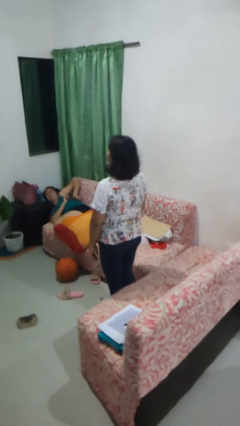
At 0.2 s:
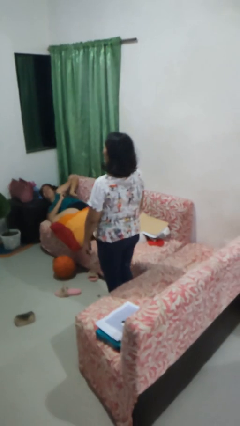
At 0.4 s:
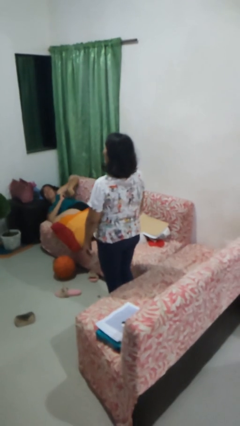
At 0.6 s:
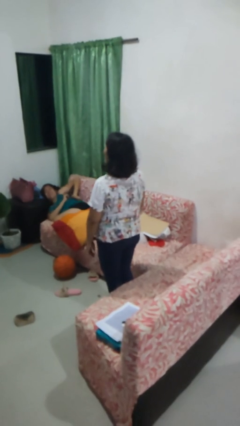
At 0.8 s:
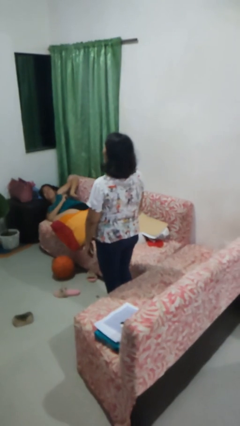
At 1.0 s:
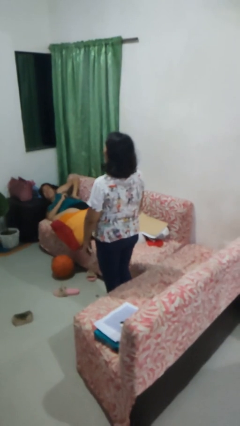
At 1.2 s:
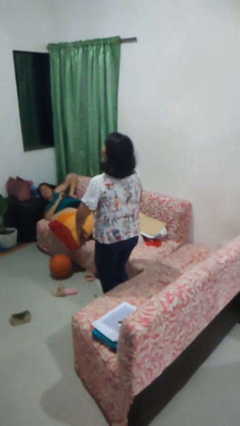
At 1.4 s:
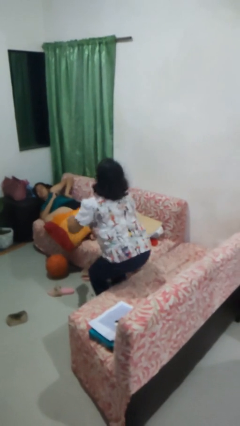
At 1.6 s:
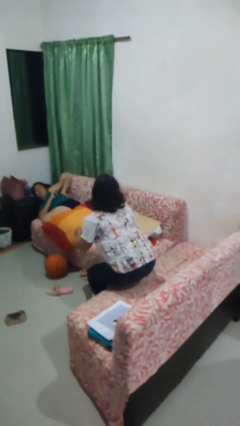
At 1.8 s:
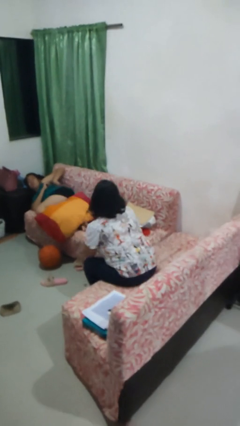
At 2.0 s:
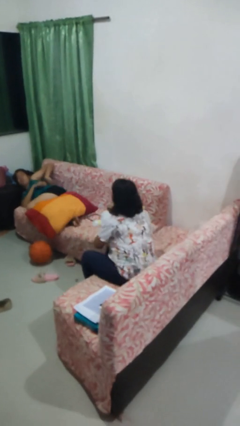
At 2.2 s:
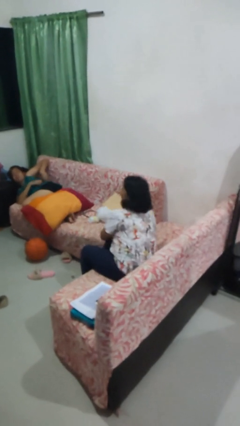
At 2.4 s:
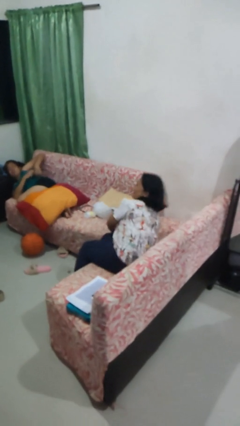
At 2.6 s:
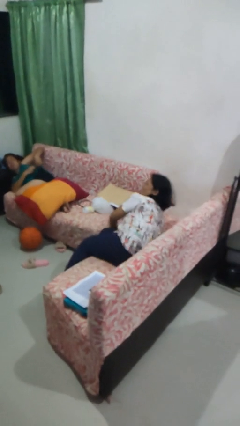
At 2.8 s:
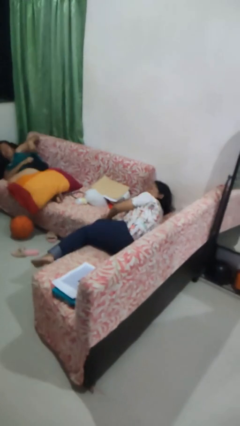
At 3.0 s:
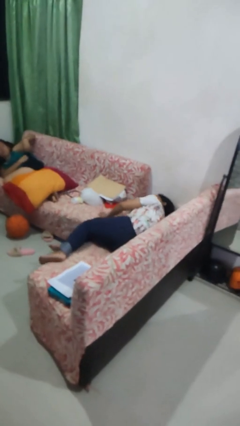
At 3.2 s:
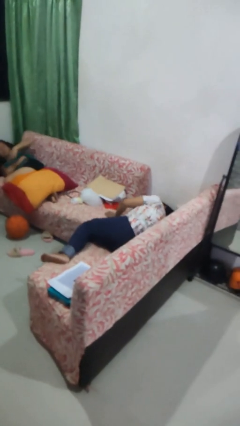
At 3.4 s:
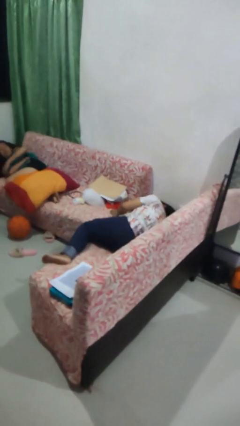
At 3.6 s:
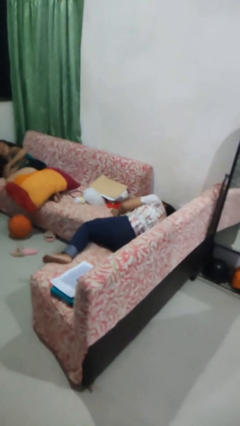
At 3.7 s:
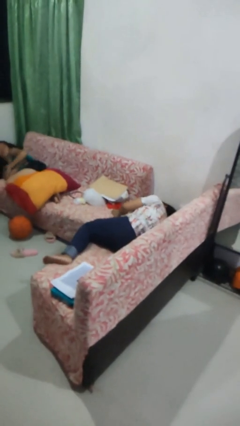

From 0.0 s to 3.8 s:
person lies down on couch

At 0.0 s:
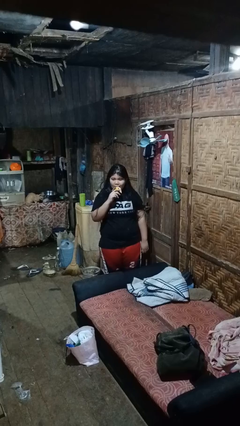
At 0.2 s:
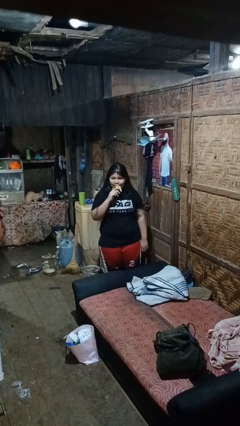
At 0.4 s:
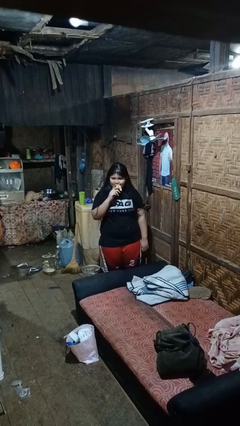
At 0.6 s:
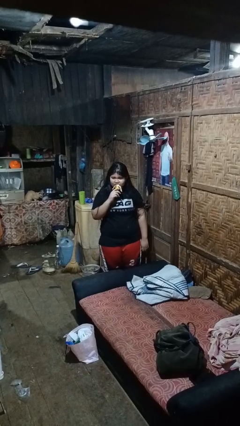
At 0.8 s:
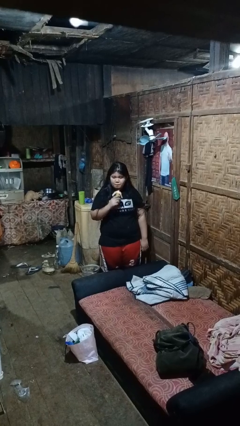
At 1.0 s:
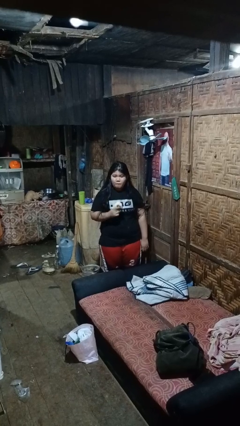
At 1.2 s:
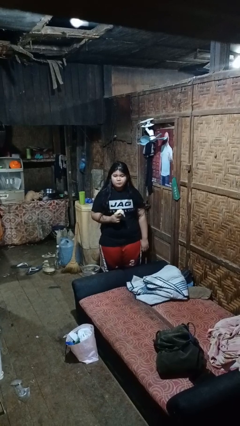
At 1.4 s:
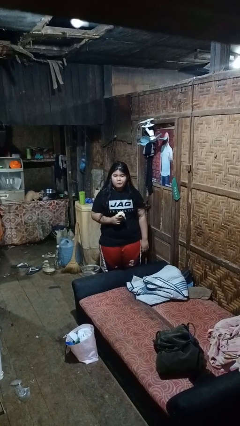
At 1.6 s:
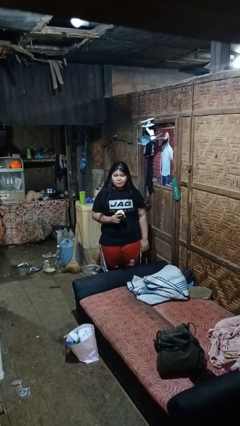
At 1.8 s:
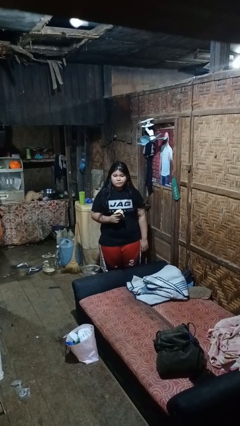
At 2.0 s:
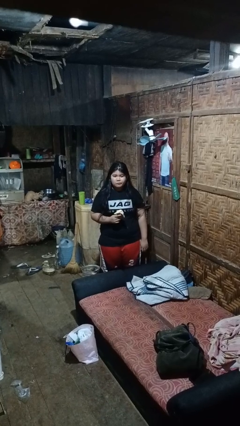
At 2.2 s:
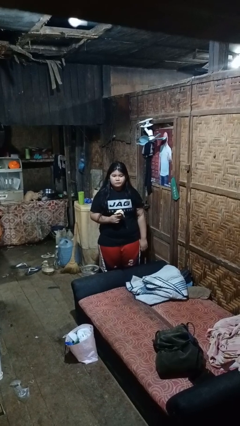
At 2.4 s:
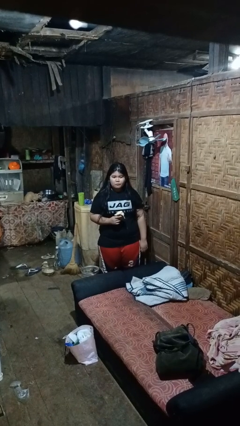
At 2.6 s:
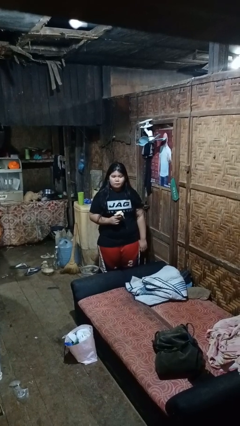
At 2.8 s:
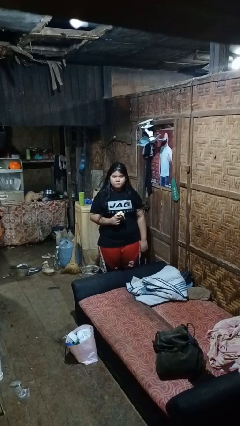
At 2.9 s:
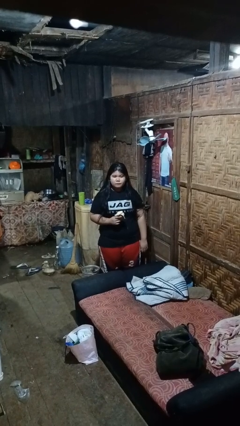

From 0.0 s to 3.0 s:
person eats banana

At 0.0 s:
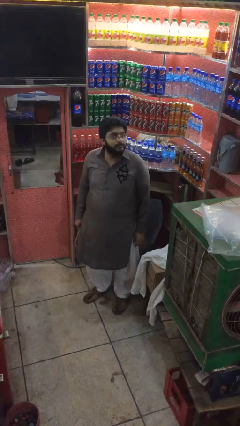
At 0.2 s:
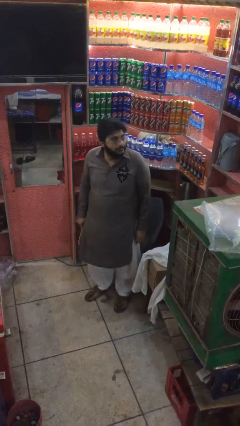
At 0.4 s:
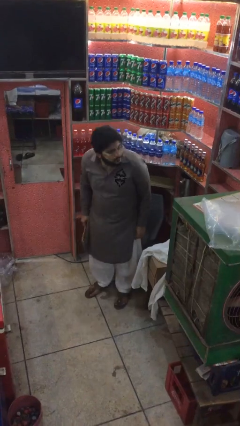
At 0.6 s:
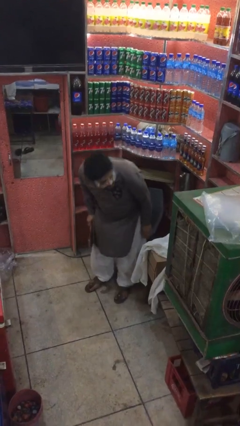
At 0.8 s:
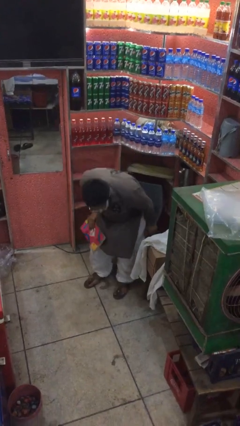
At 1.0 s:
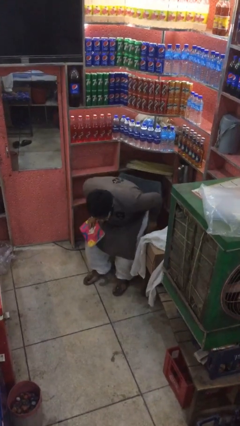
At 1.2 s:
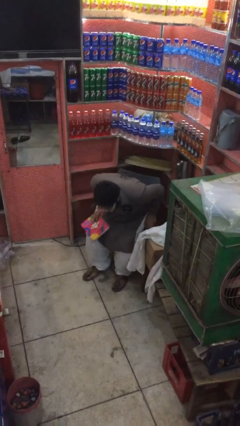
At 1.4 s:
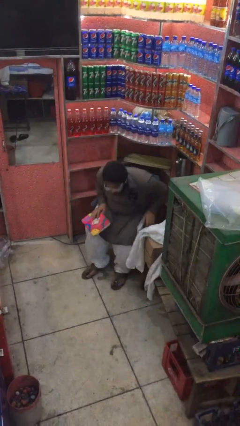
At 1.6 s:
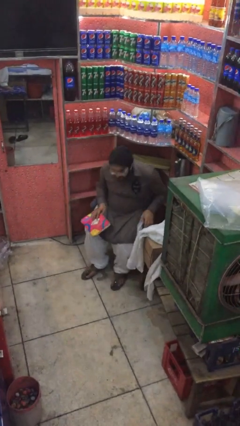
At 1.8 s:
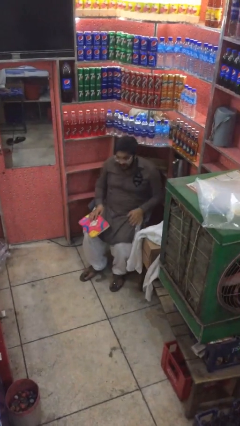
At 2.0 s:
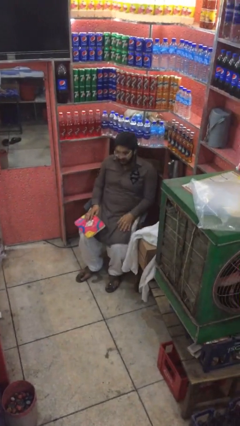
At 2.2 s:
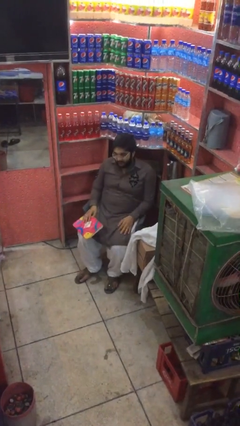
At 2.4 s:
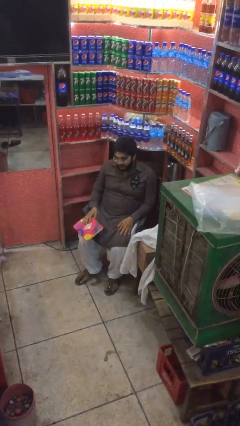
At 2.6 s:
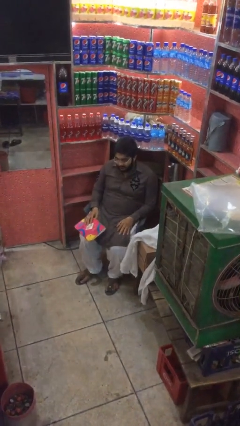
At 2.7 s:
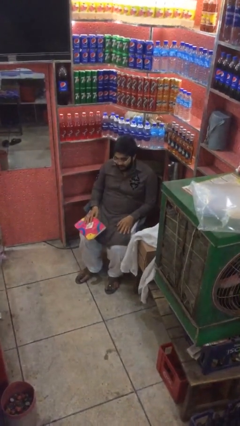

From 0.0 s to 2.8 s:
person sits down

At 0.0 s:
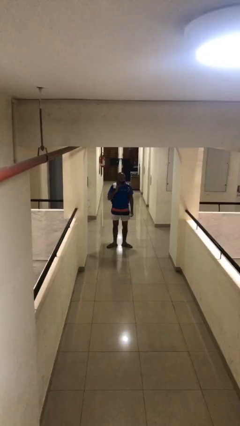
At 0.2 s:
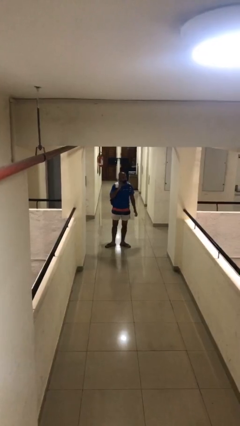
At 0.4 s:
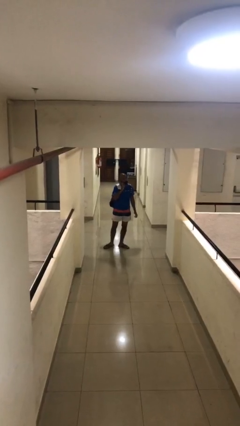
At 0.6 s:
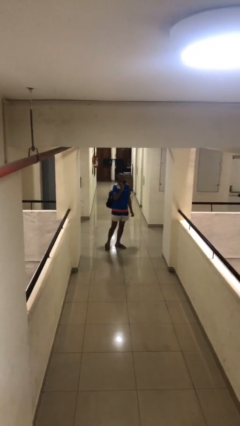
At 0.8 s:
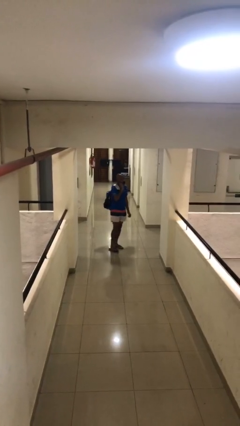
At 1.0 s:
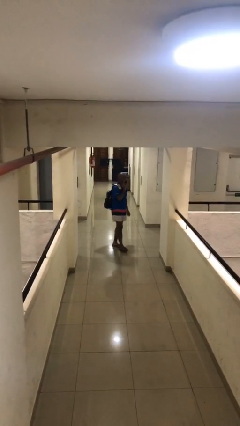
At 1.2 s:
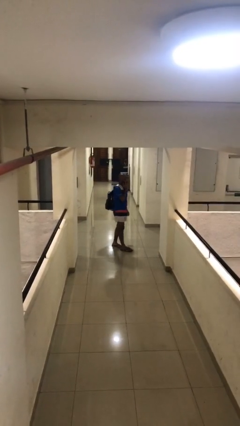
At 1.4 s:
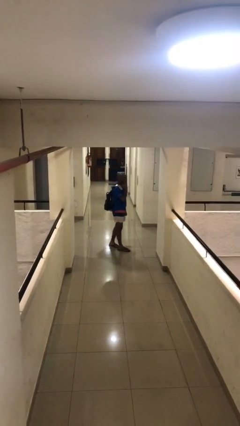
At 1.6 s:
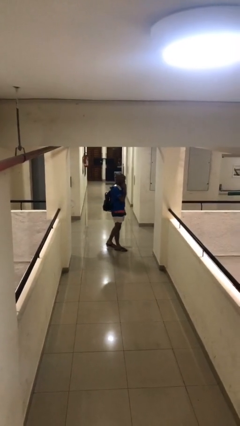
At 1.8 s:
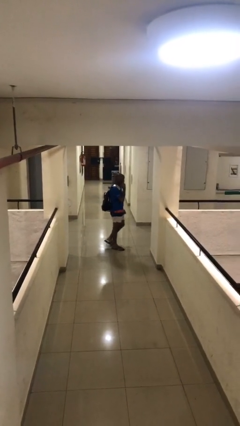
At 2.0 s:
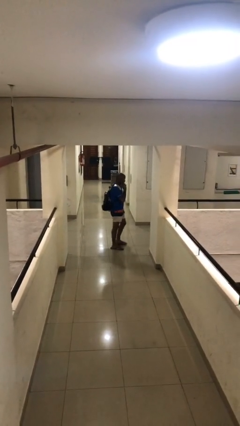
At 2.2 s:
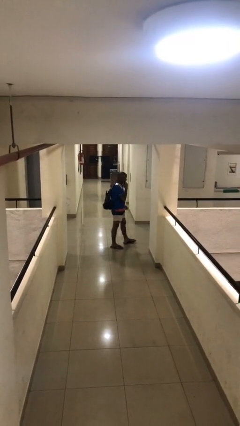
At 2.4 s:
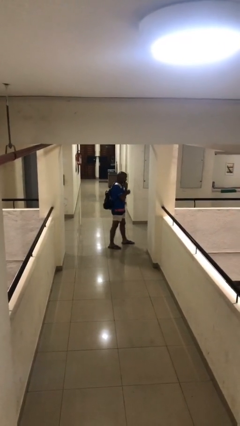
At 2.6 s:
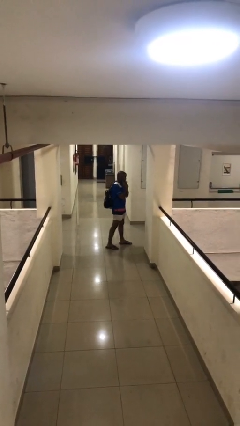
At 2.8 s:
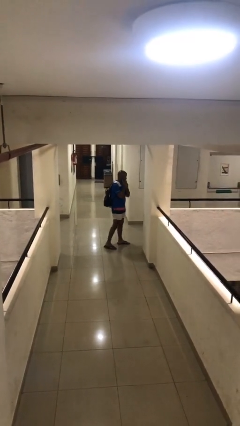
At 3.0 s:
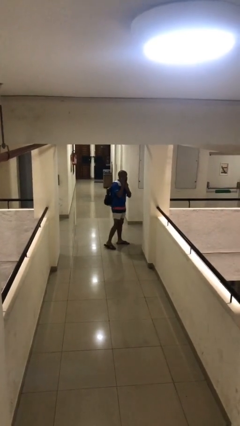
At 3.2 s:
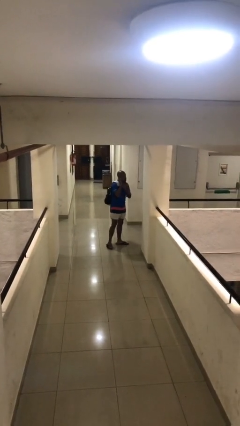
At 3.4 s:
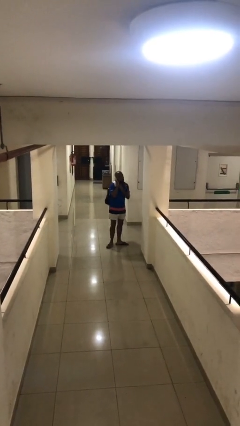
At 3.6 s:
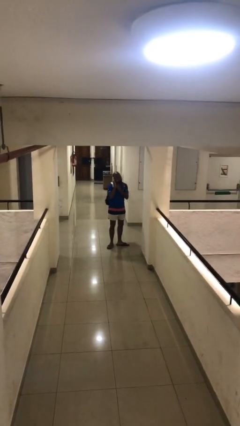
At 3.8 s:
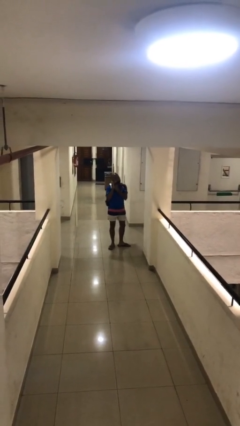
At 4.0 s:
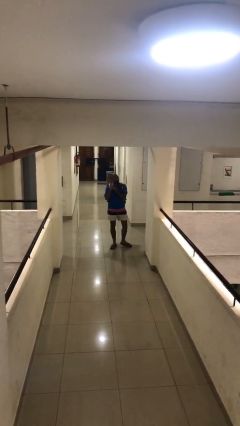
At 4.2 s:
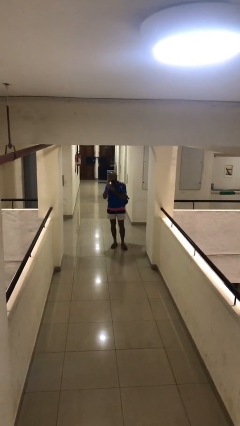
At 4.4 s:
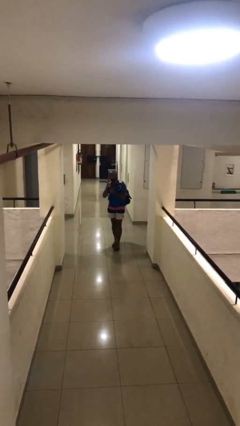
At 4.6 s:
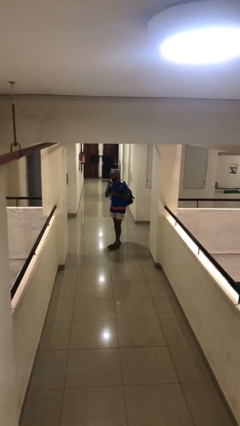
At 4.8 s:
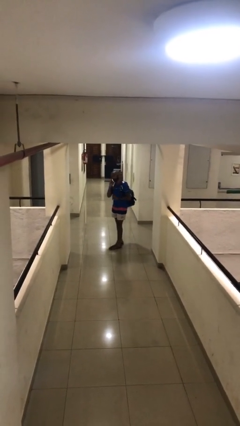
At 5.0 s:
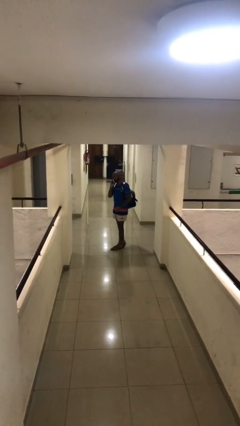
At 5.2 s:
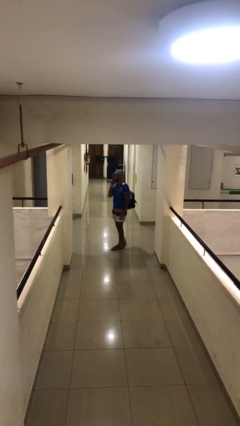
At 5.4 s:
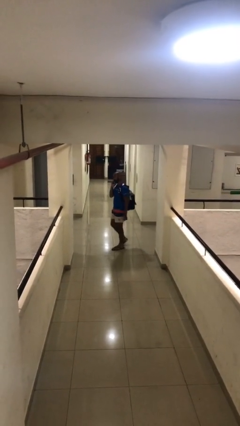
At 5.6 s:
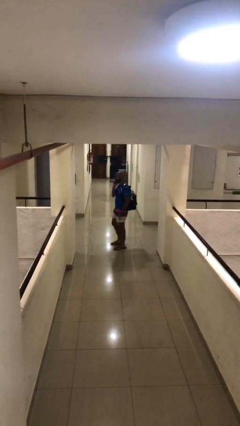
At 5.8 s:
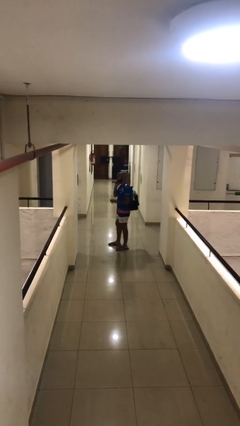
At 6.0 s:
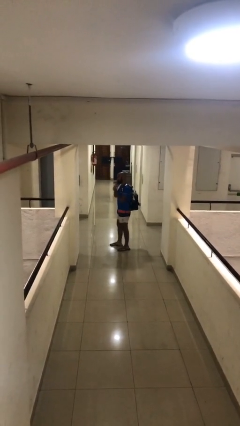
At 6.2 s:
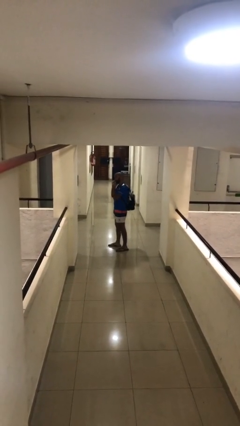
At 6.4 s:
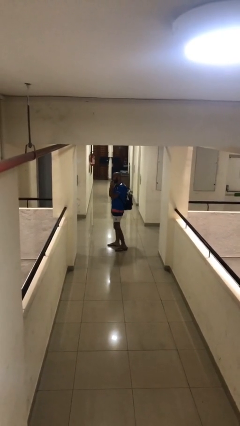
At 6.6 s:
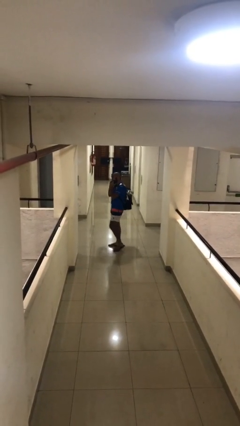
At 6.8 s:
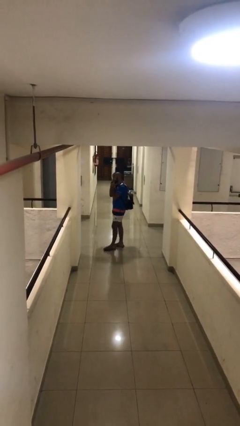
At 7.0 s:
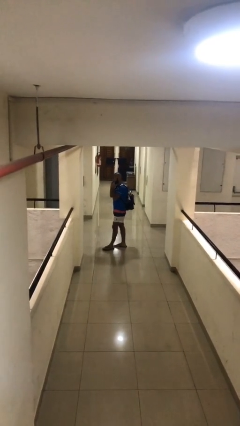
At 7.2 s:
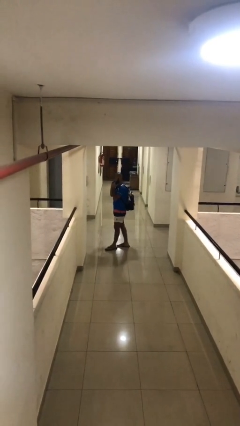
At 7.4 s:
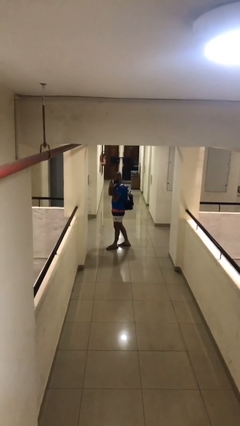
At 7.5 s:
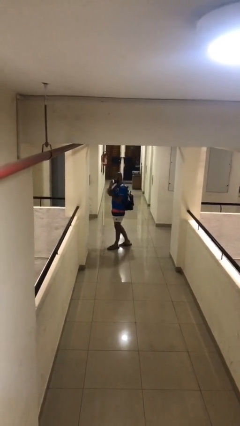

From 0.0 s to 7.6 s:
person talks on phone

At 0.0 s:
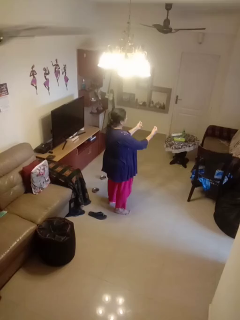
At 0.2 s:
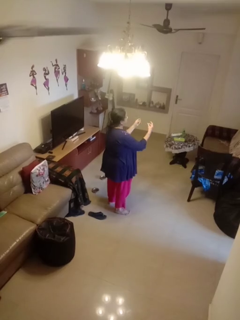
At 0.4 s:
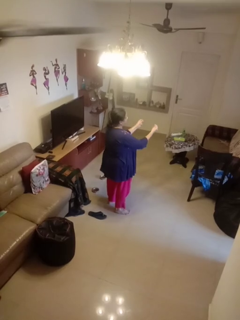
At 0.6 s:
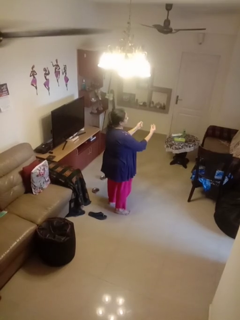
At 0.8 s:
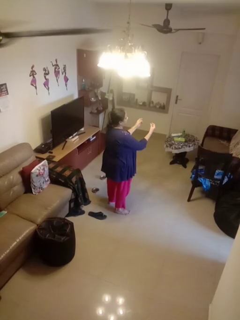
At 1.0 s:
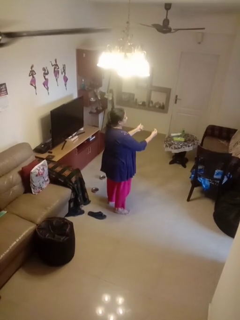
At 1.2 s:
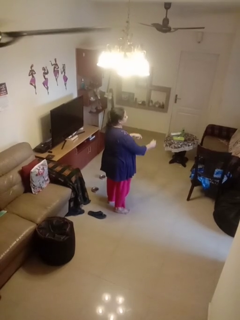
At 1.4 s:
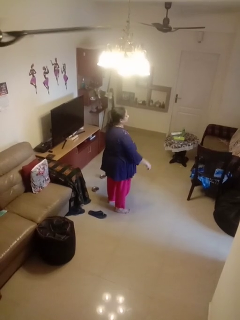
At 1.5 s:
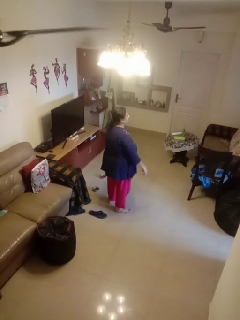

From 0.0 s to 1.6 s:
person snaps fingers
